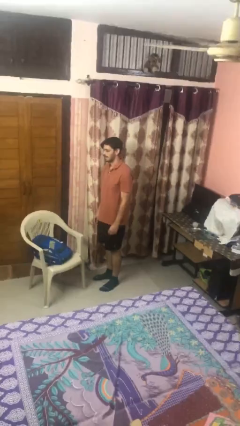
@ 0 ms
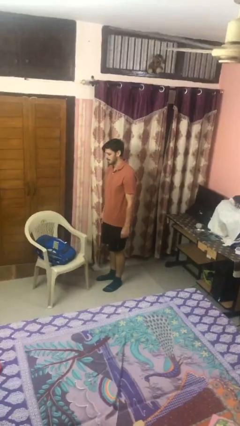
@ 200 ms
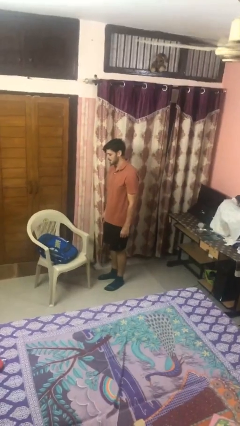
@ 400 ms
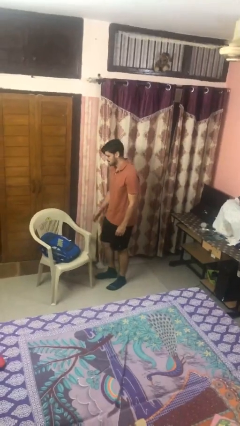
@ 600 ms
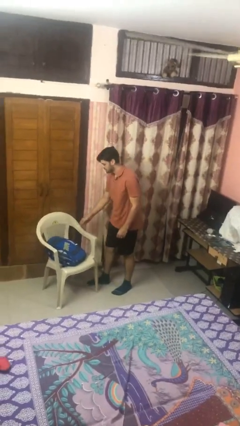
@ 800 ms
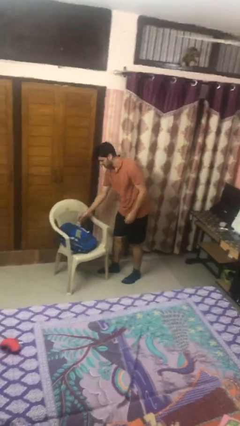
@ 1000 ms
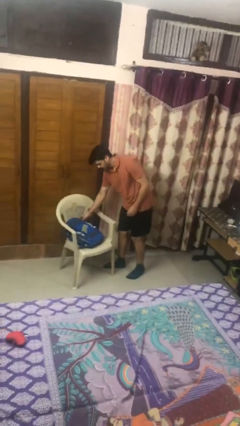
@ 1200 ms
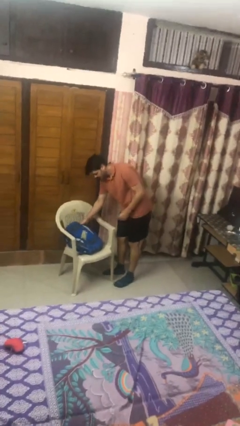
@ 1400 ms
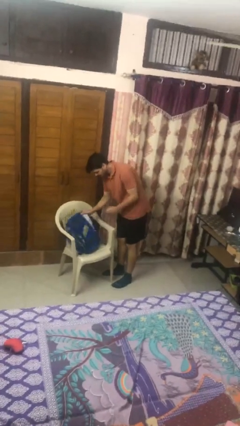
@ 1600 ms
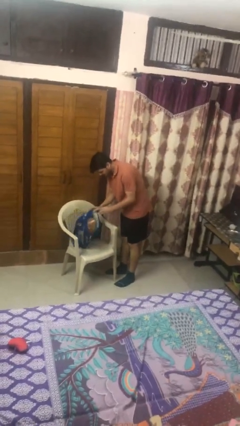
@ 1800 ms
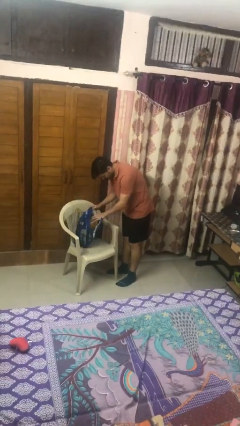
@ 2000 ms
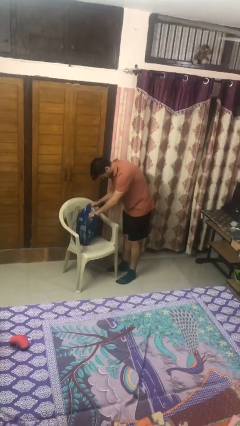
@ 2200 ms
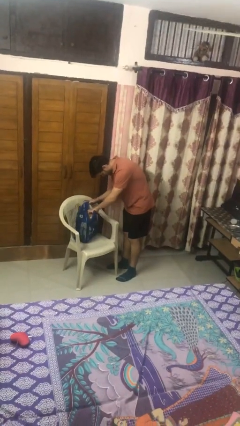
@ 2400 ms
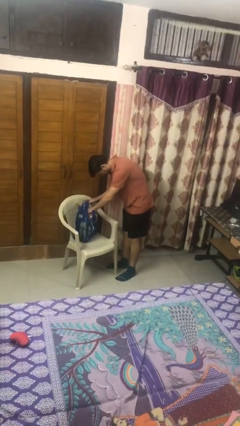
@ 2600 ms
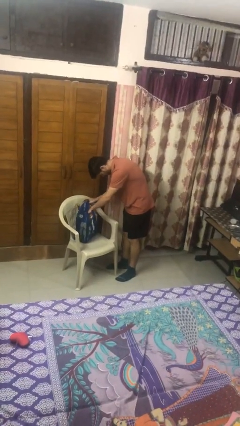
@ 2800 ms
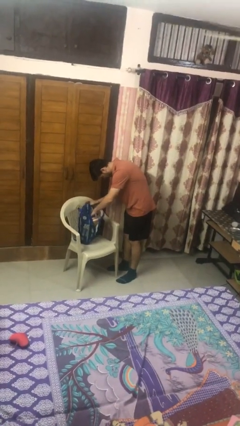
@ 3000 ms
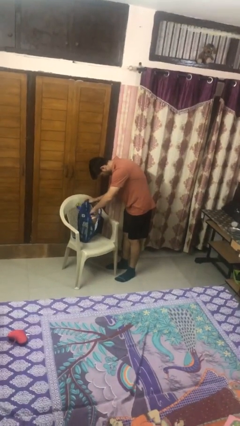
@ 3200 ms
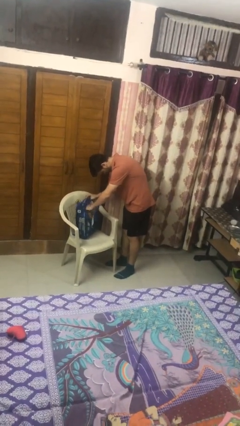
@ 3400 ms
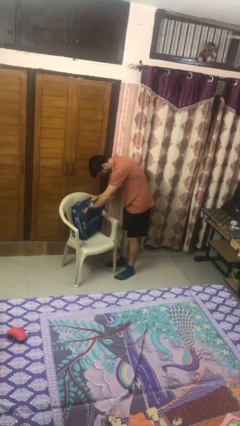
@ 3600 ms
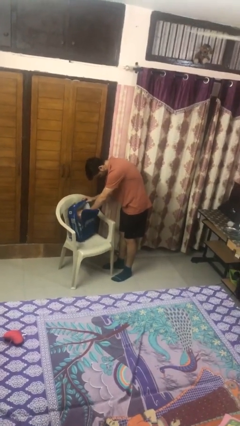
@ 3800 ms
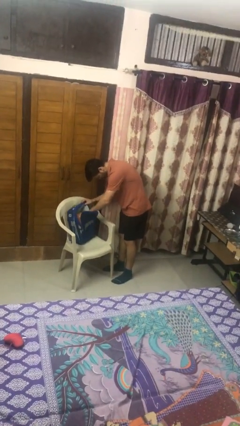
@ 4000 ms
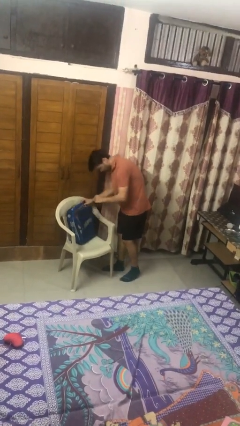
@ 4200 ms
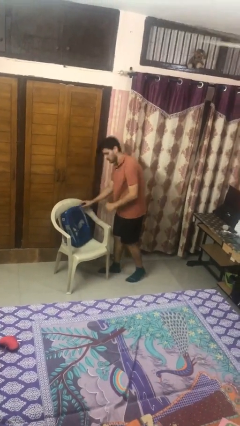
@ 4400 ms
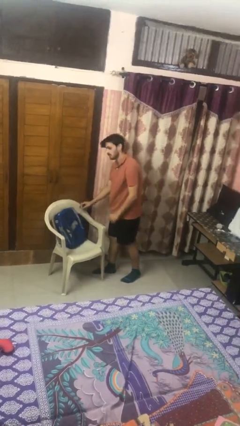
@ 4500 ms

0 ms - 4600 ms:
person searches in bag

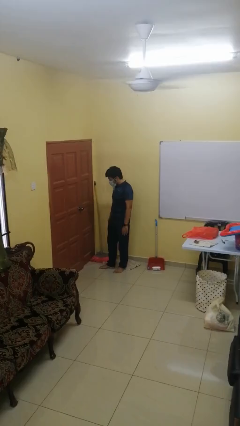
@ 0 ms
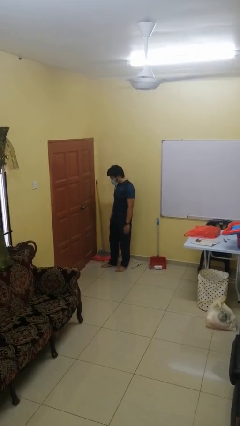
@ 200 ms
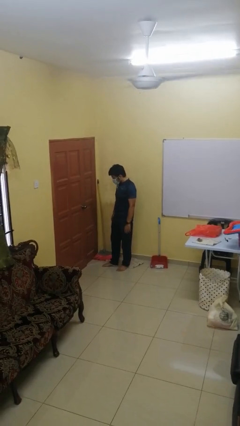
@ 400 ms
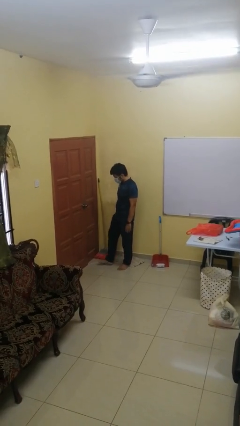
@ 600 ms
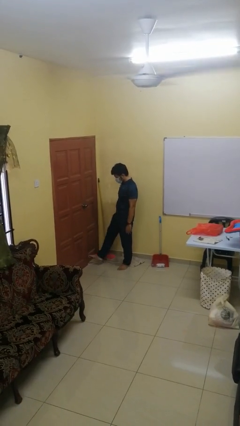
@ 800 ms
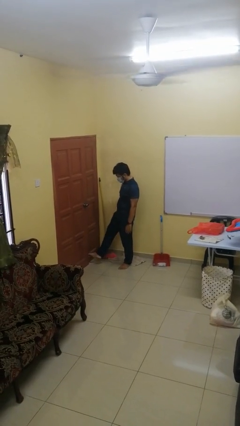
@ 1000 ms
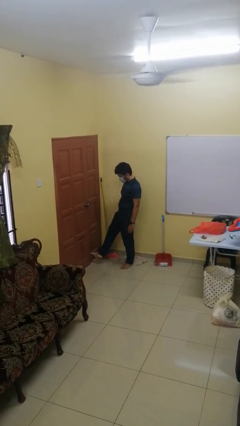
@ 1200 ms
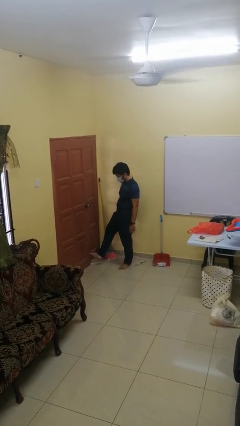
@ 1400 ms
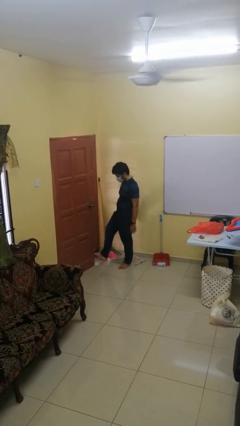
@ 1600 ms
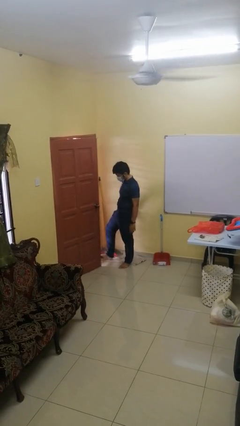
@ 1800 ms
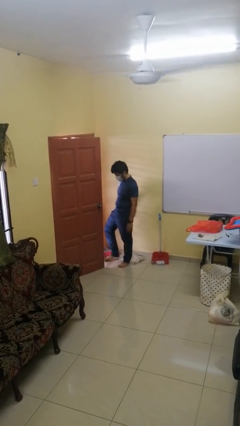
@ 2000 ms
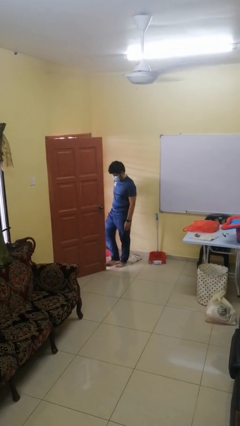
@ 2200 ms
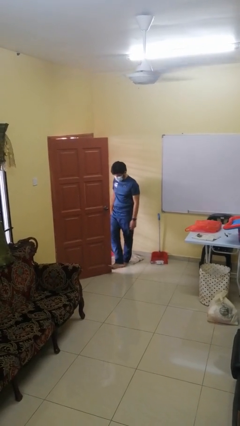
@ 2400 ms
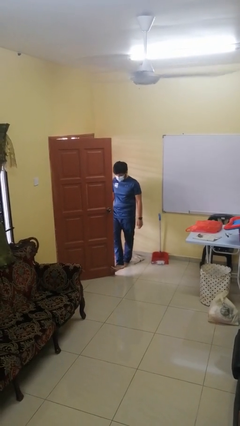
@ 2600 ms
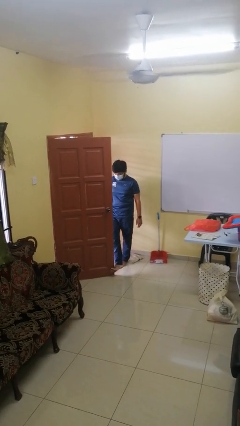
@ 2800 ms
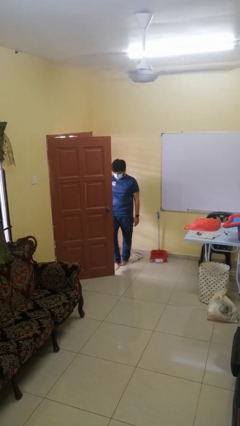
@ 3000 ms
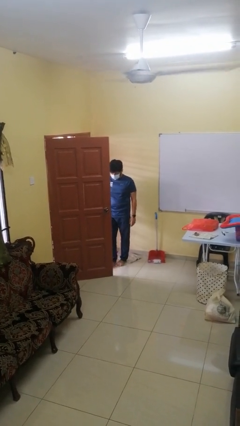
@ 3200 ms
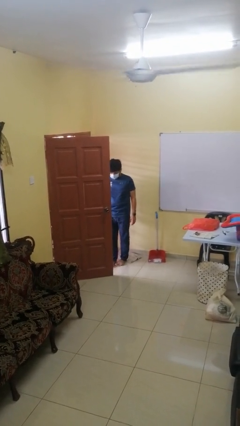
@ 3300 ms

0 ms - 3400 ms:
person opens facility door

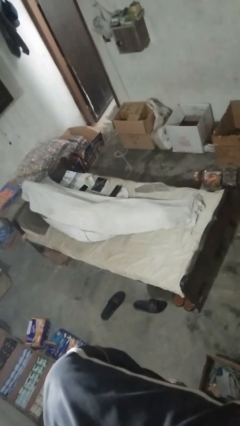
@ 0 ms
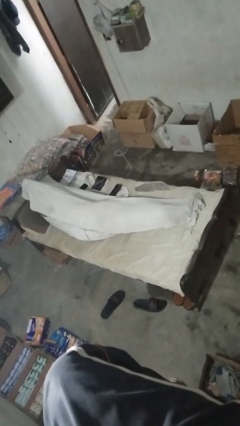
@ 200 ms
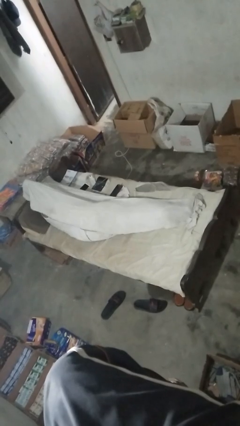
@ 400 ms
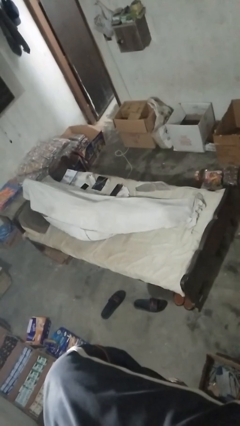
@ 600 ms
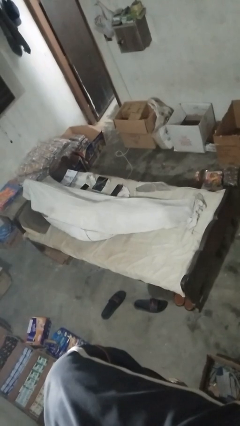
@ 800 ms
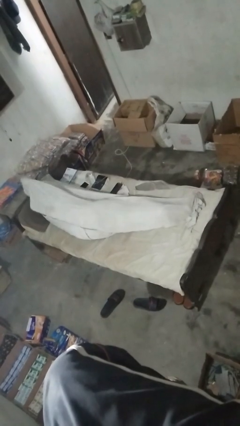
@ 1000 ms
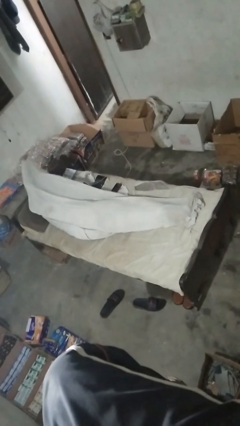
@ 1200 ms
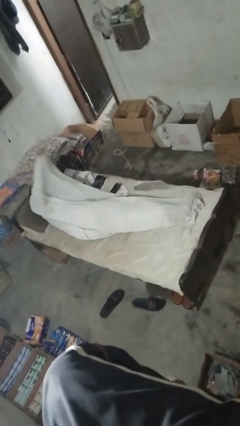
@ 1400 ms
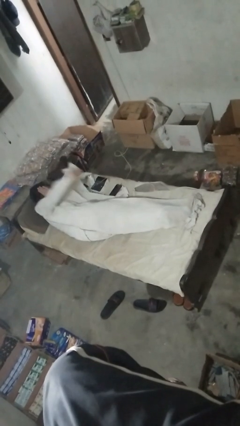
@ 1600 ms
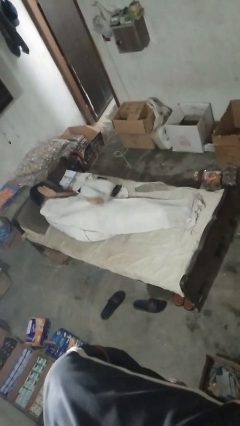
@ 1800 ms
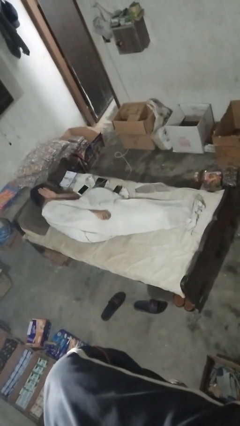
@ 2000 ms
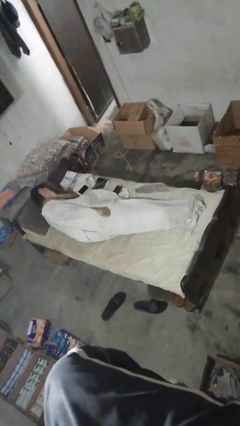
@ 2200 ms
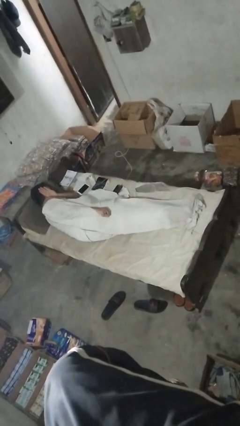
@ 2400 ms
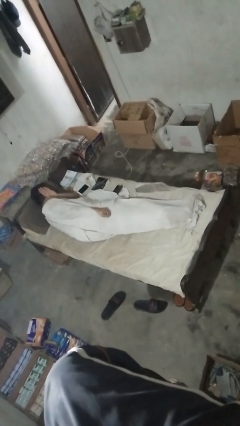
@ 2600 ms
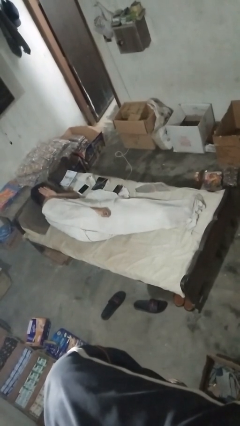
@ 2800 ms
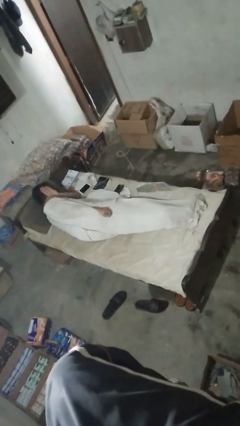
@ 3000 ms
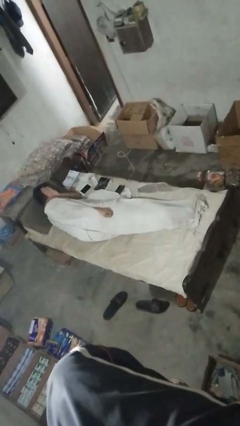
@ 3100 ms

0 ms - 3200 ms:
person uncovers with bedsheets

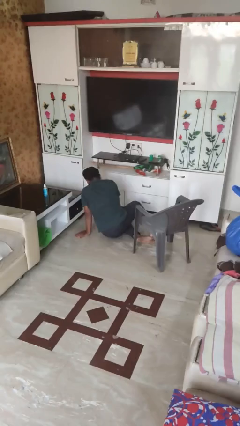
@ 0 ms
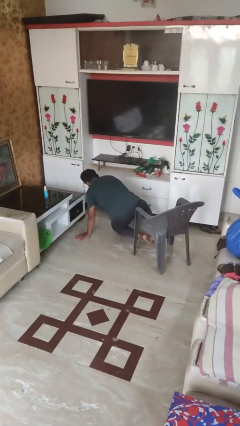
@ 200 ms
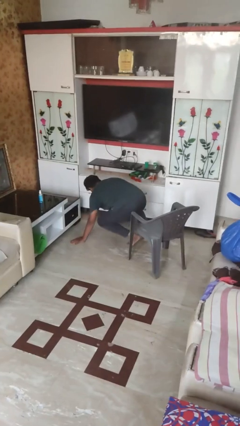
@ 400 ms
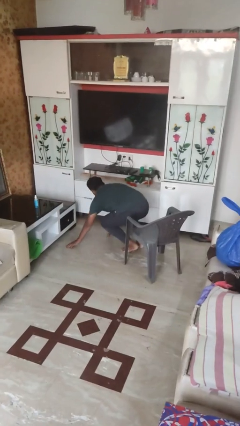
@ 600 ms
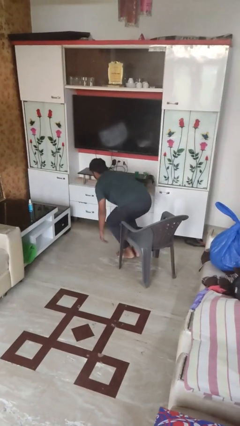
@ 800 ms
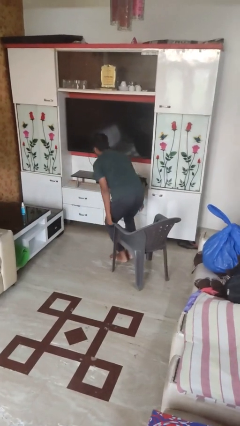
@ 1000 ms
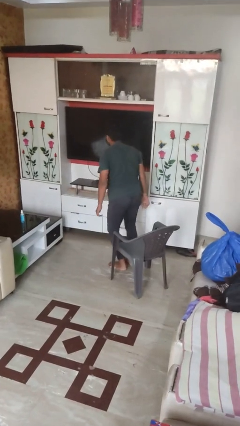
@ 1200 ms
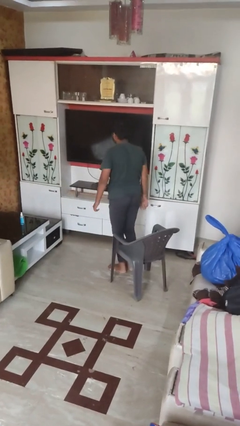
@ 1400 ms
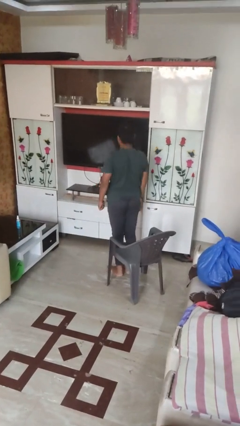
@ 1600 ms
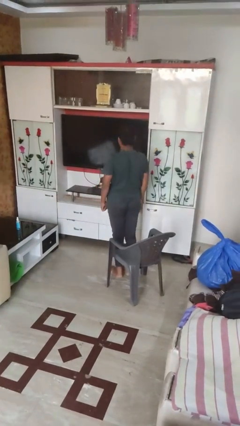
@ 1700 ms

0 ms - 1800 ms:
person stands up from floor

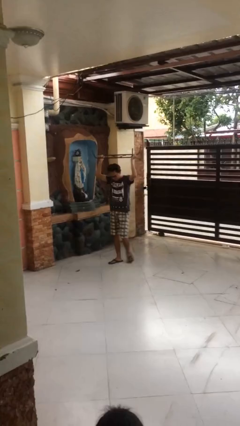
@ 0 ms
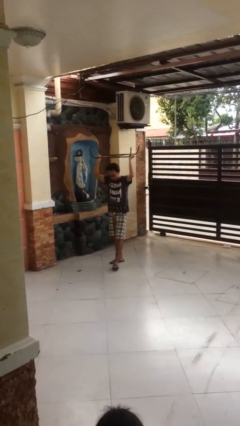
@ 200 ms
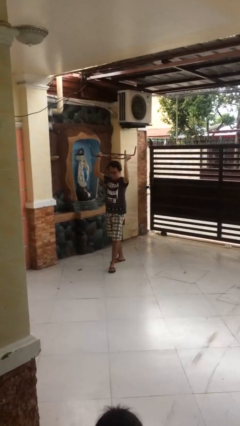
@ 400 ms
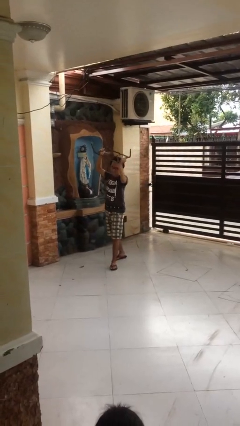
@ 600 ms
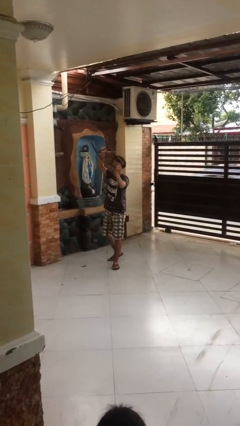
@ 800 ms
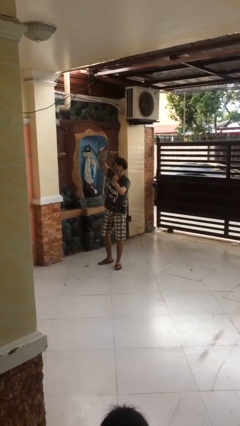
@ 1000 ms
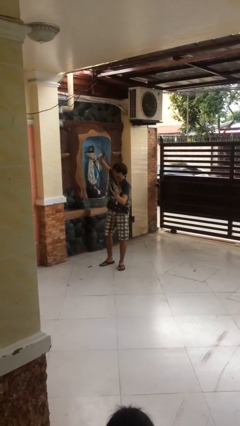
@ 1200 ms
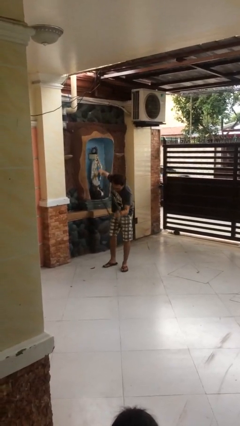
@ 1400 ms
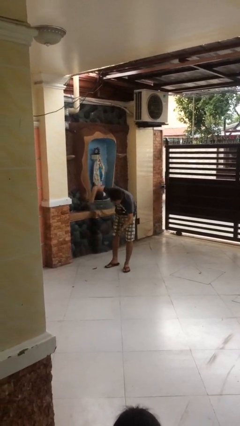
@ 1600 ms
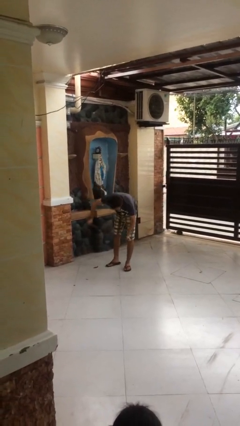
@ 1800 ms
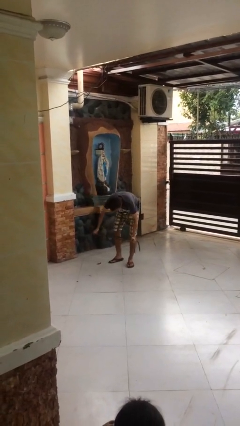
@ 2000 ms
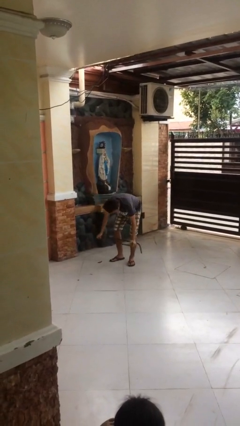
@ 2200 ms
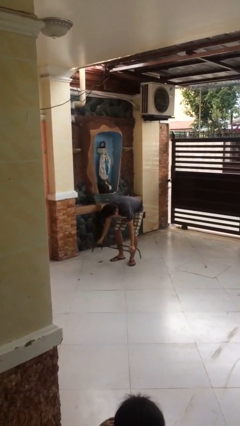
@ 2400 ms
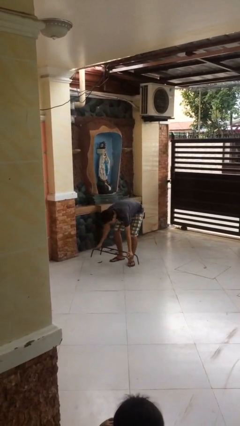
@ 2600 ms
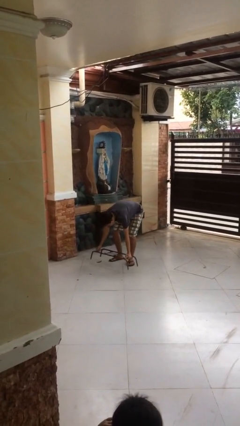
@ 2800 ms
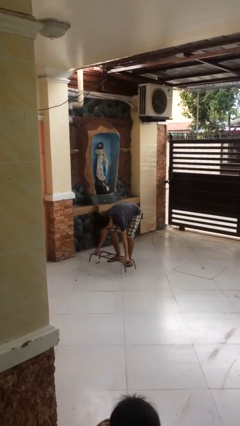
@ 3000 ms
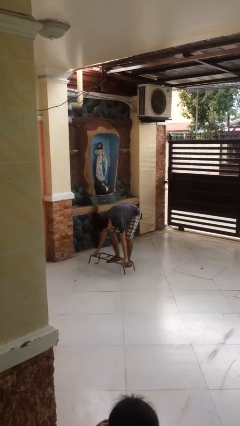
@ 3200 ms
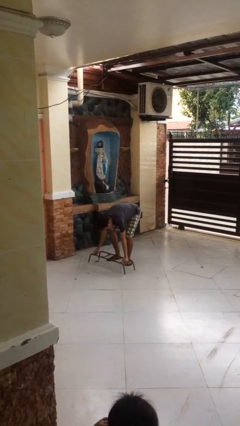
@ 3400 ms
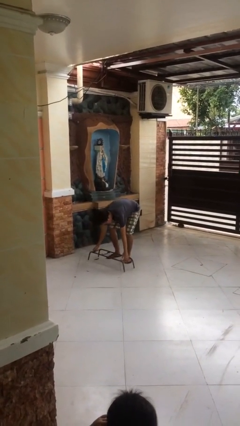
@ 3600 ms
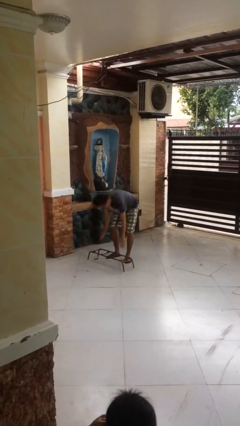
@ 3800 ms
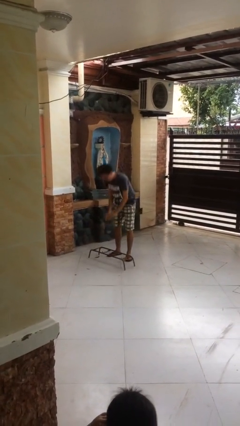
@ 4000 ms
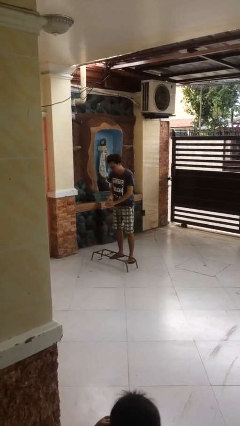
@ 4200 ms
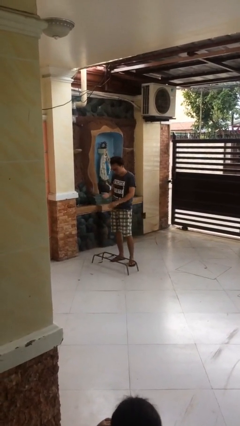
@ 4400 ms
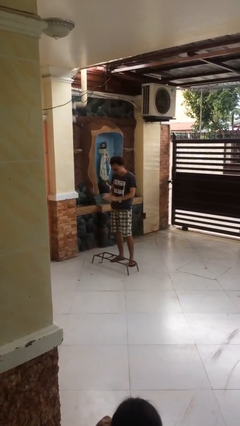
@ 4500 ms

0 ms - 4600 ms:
person puts down object on floor
